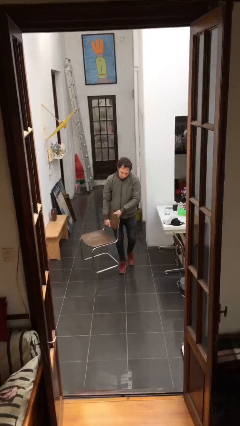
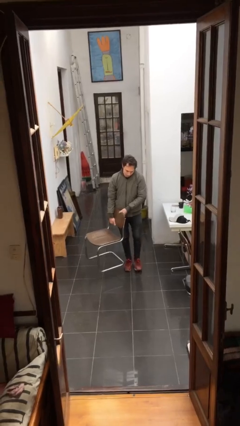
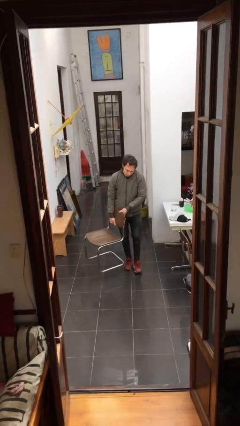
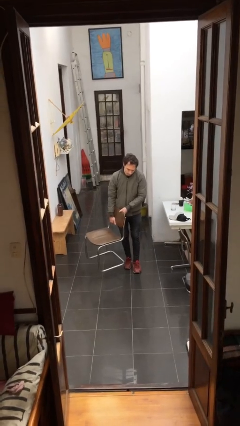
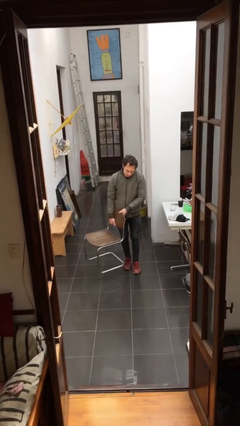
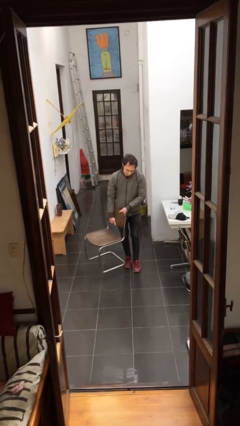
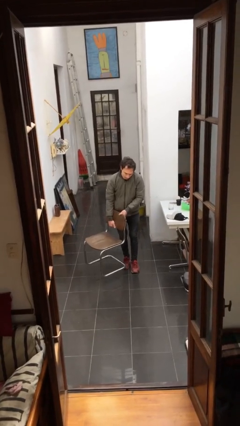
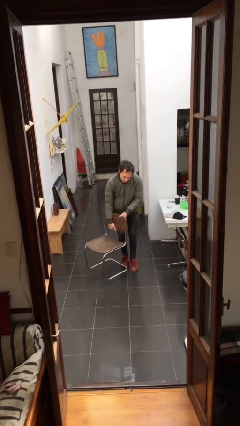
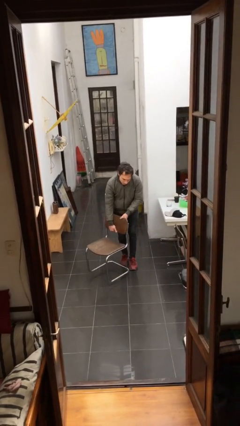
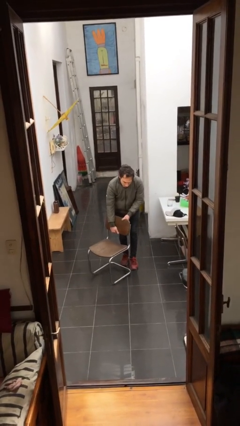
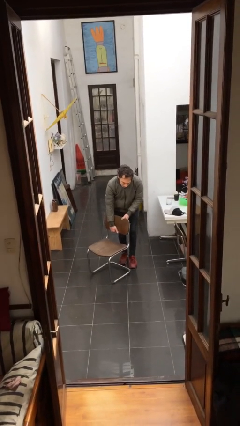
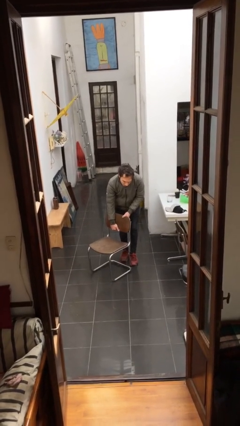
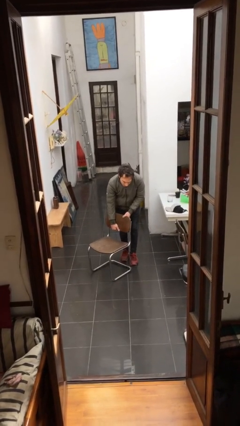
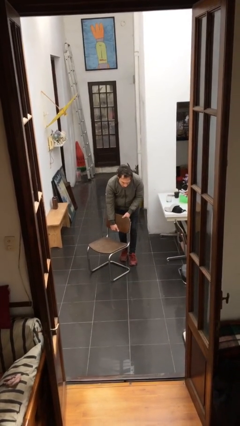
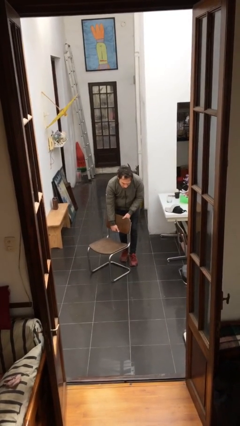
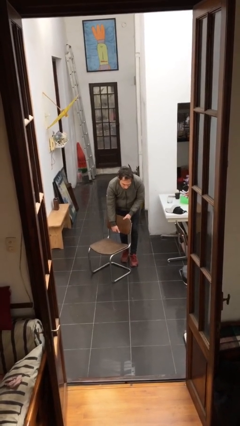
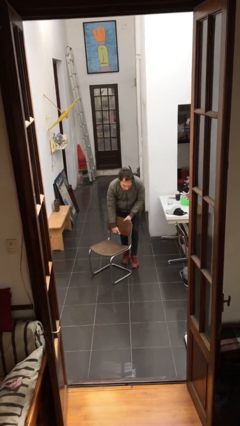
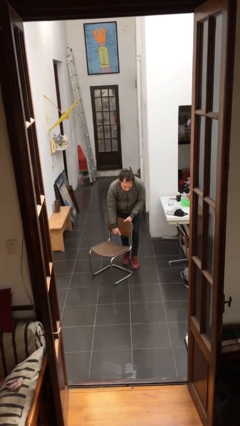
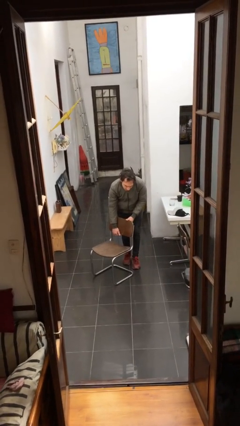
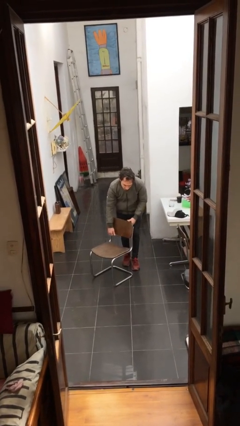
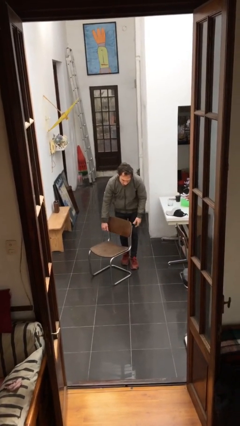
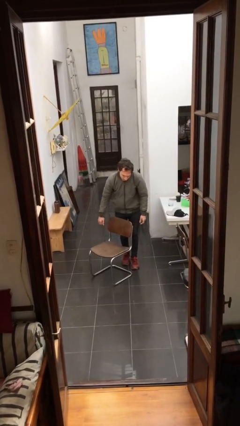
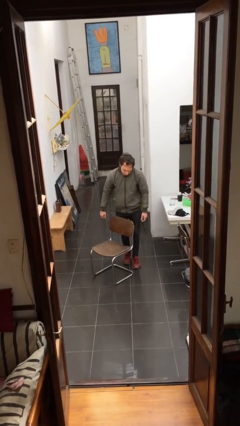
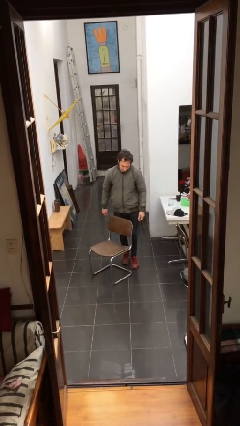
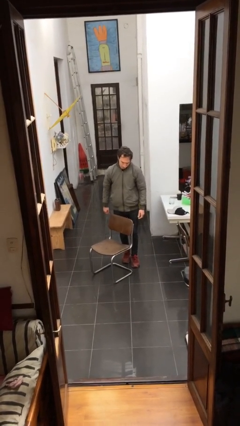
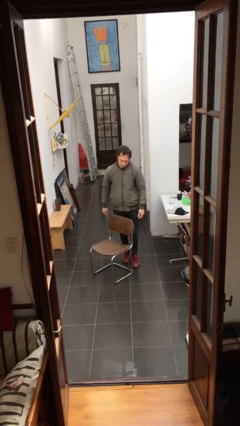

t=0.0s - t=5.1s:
person puts down object on floor

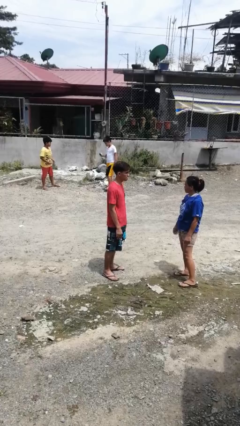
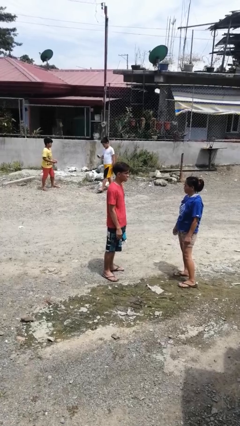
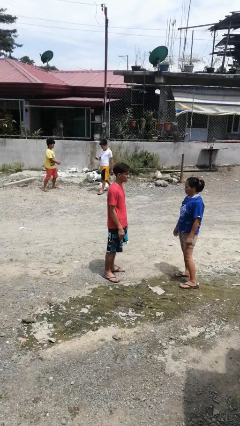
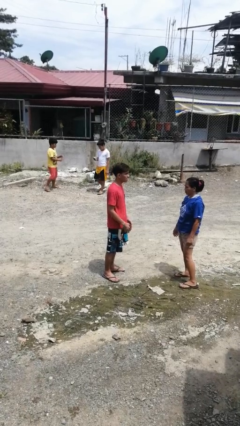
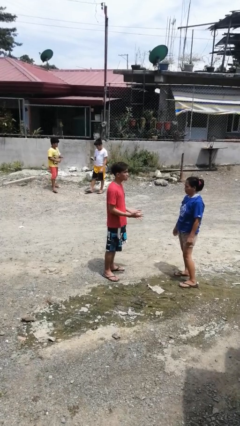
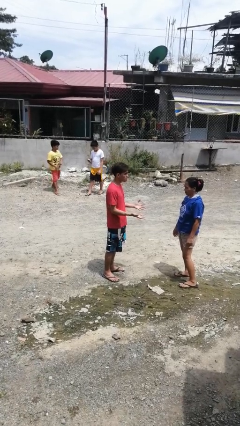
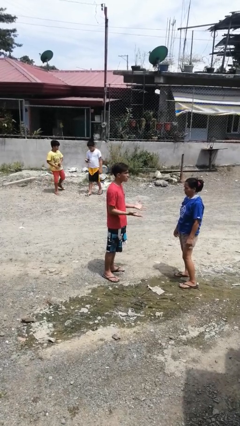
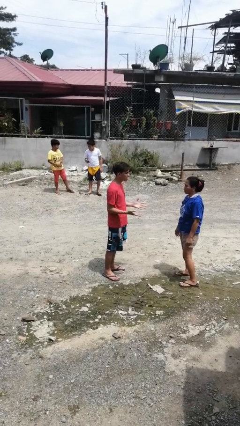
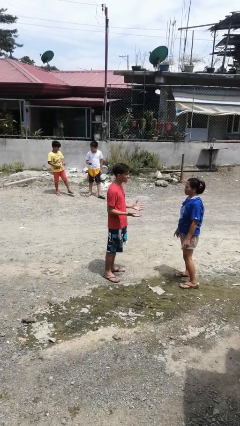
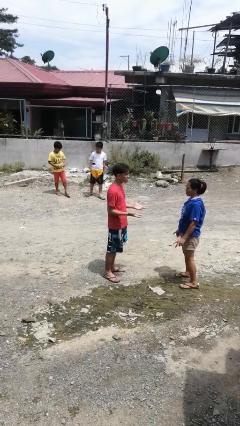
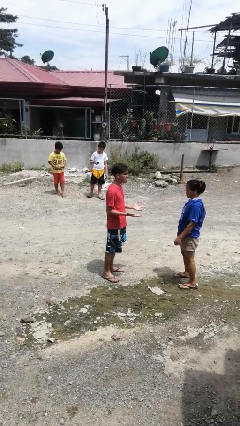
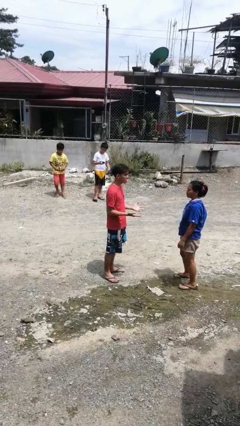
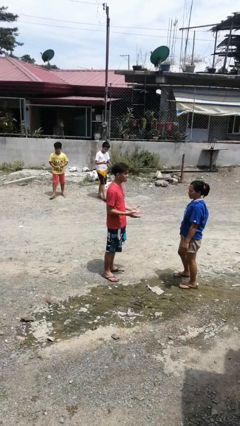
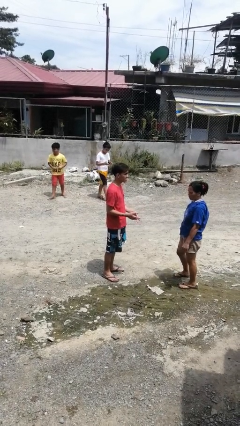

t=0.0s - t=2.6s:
person talks to person

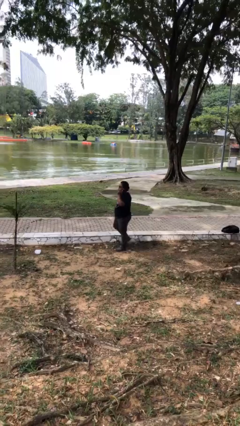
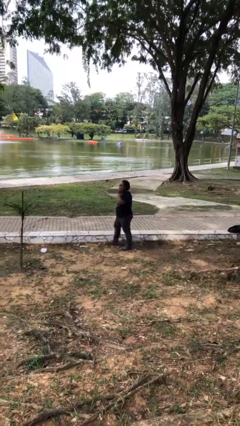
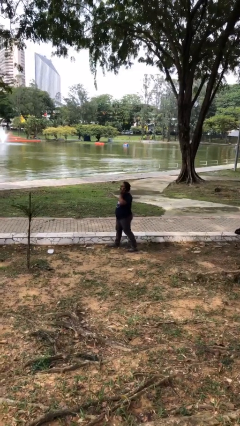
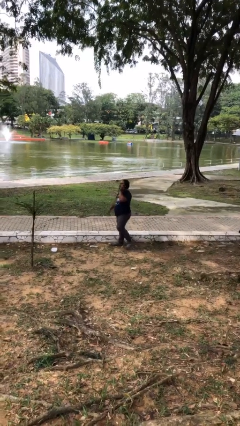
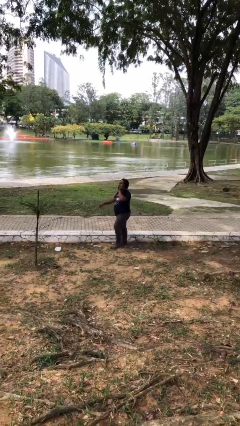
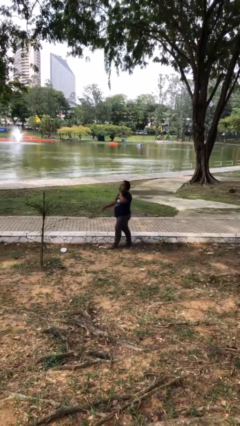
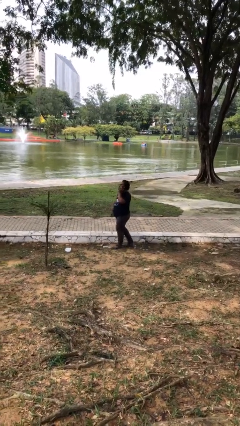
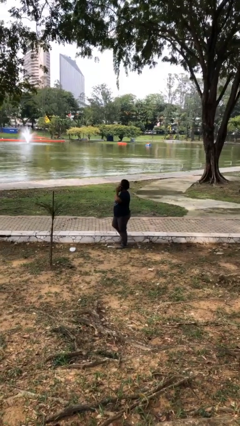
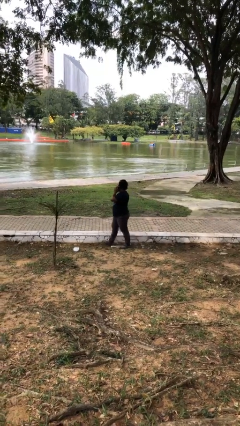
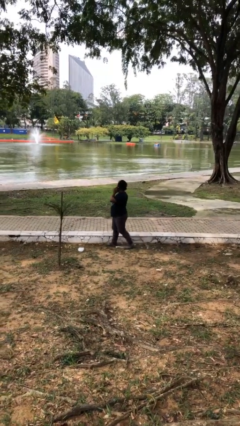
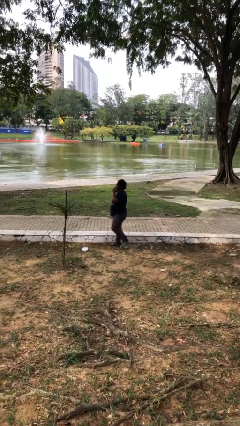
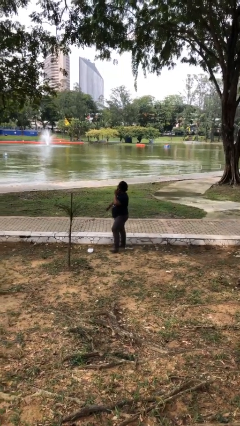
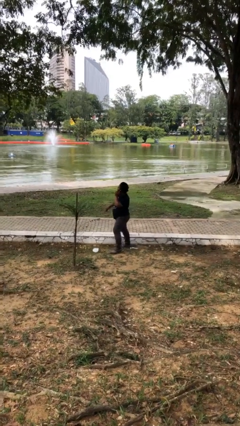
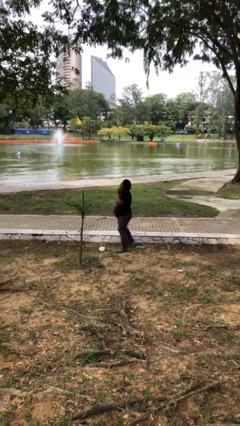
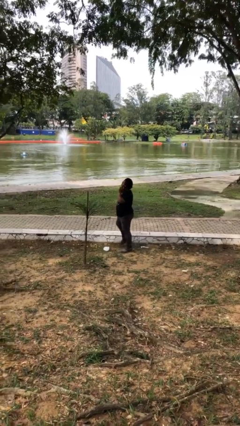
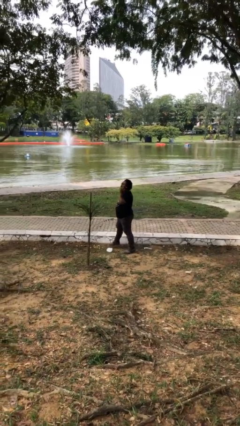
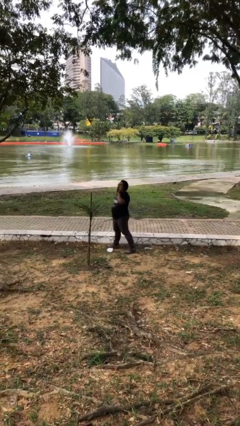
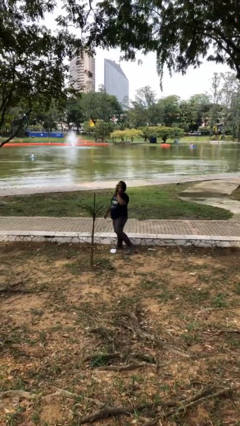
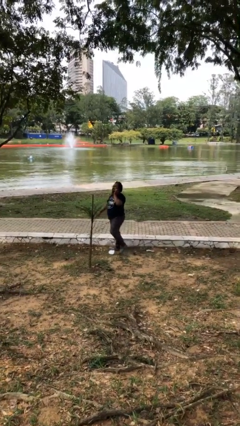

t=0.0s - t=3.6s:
person talks on phone

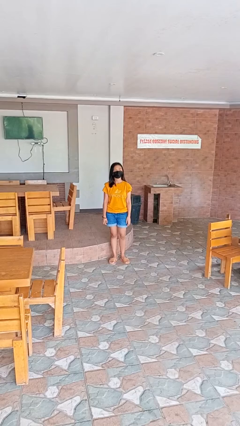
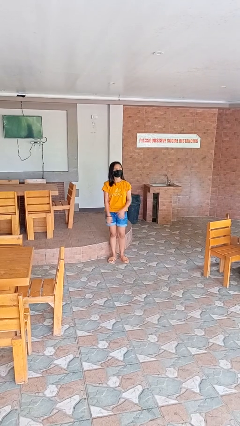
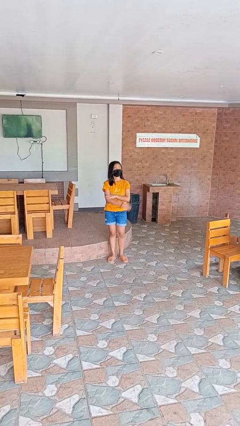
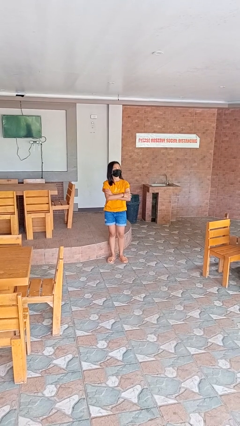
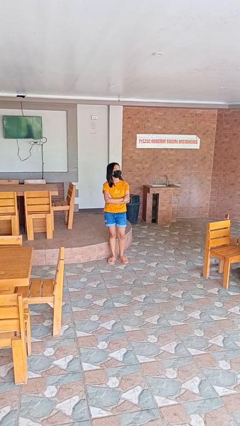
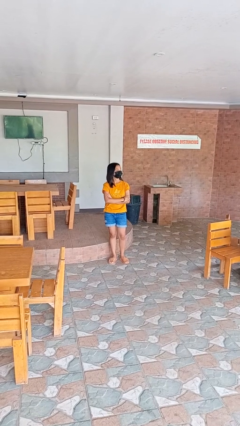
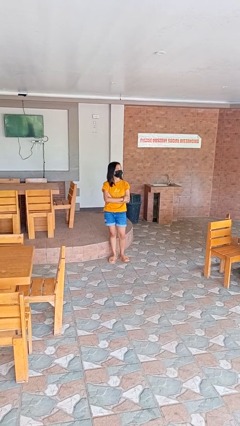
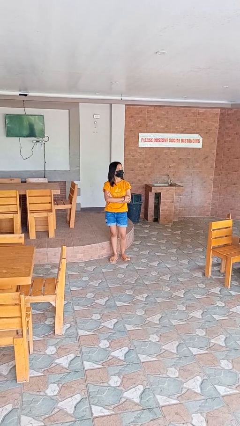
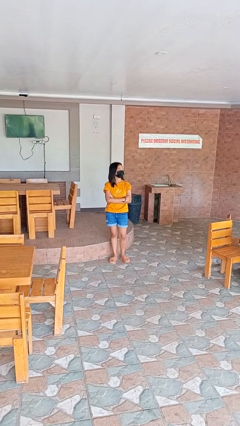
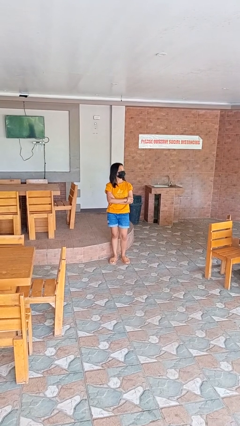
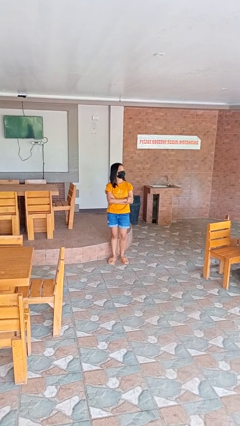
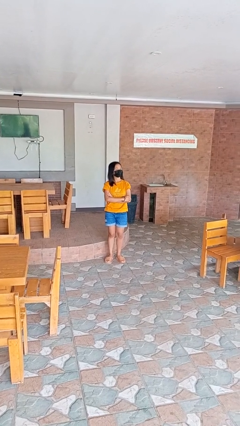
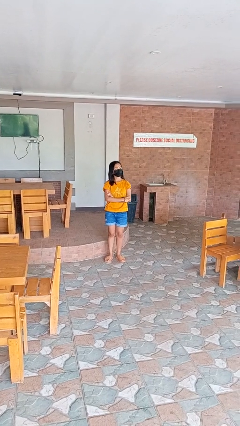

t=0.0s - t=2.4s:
person crosses arms

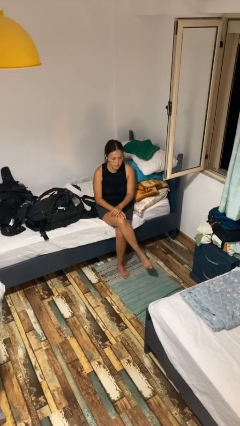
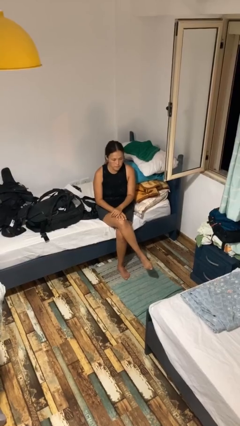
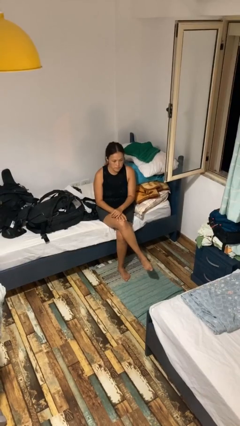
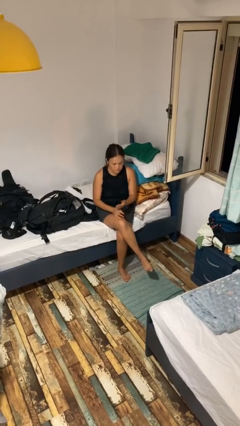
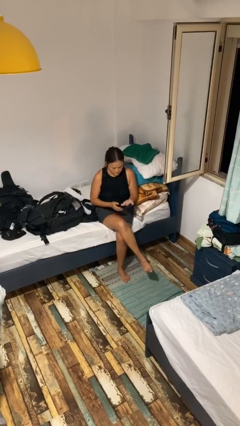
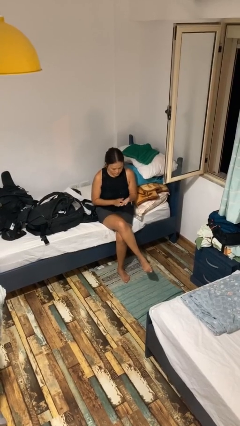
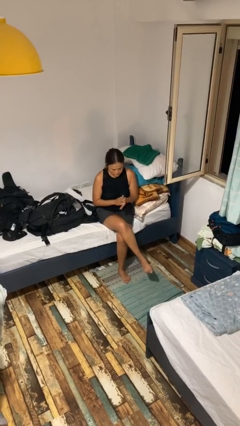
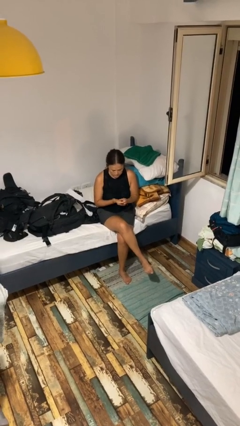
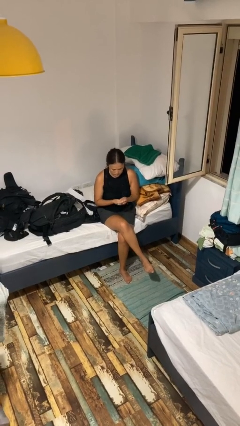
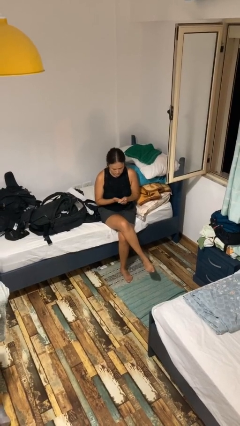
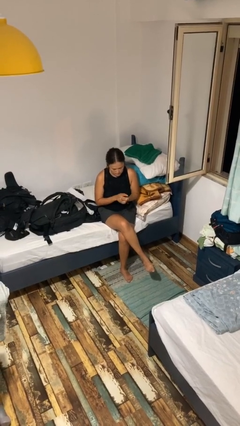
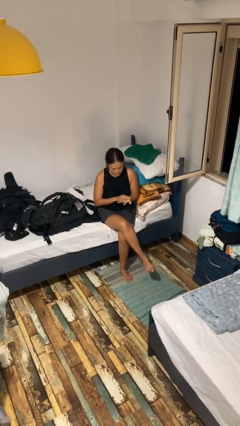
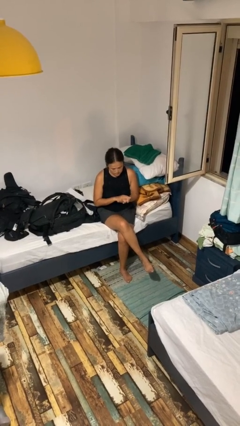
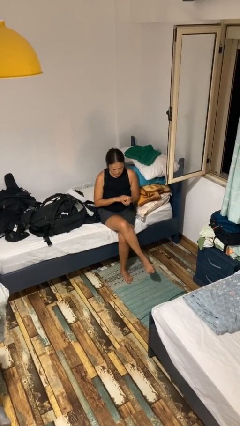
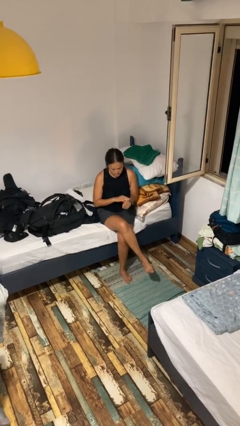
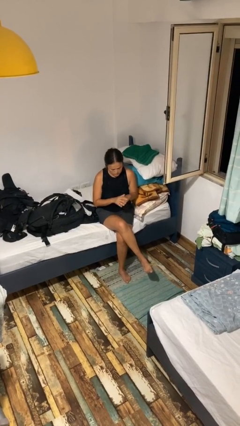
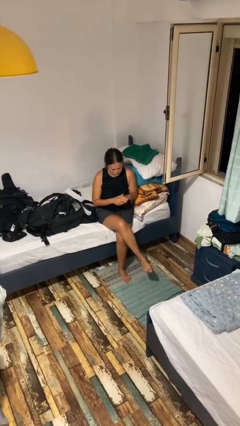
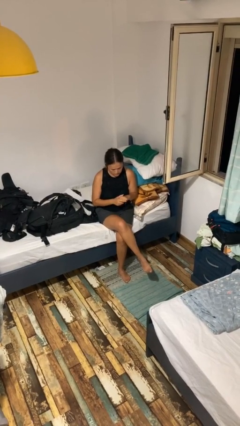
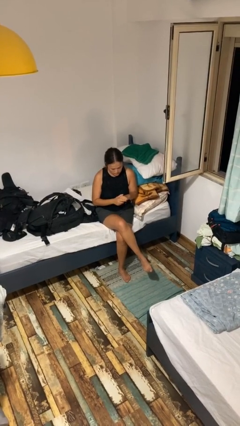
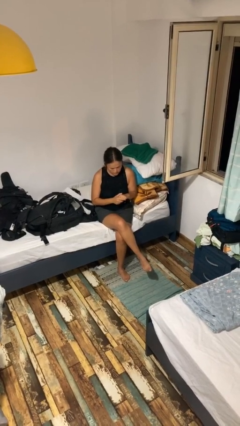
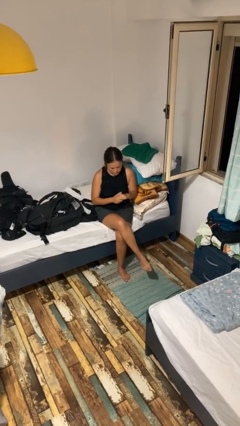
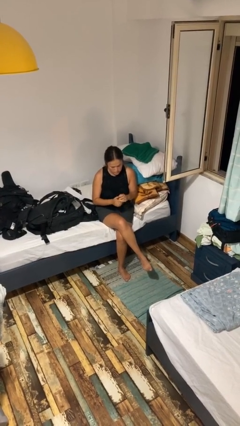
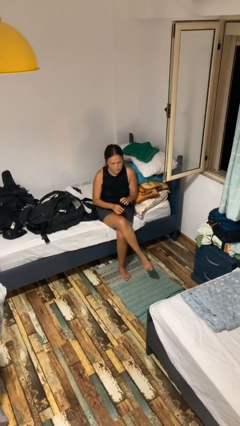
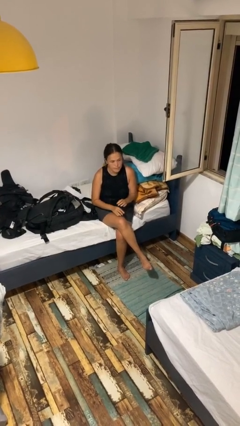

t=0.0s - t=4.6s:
person looks at hands in lap
